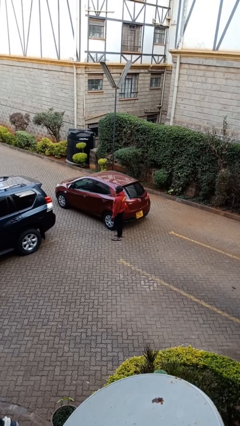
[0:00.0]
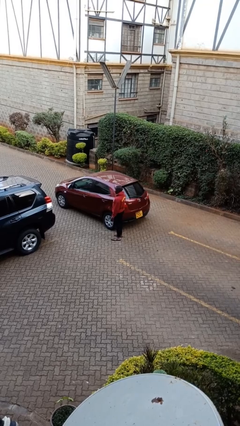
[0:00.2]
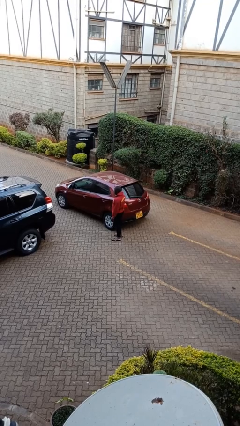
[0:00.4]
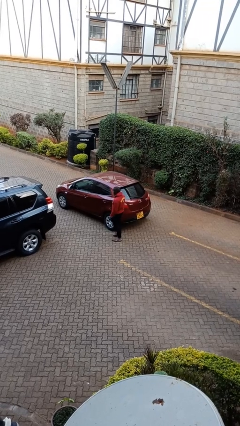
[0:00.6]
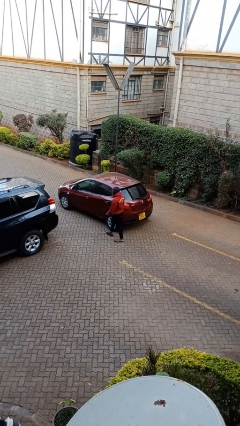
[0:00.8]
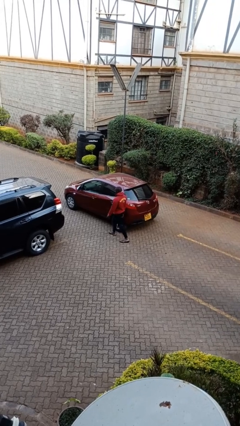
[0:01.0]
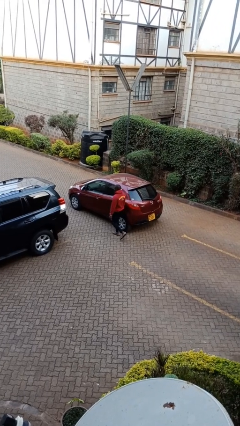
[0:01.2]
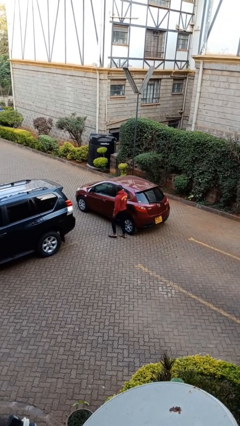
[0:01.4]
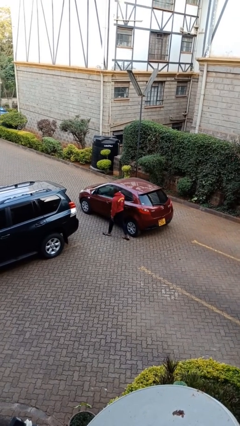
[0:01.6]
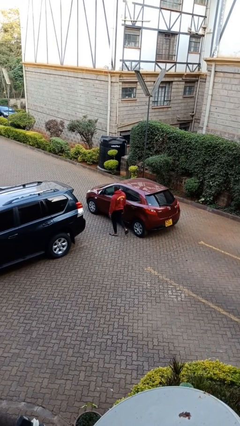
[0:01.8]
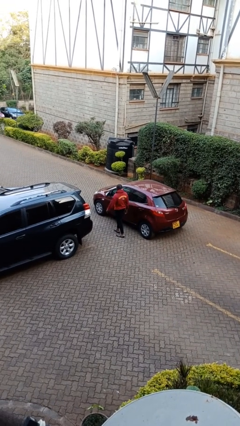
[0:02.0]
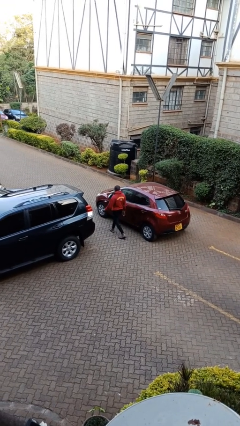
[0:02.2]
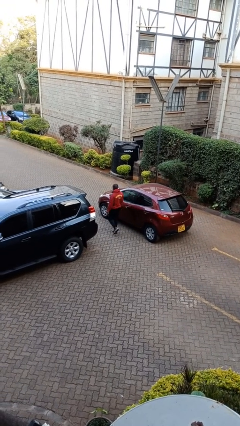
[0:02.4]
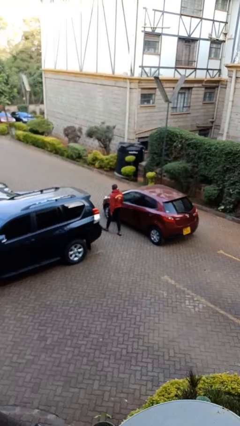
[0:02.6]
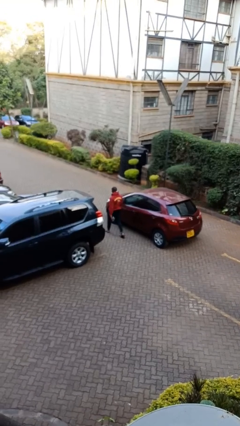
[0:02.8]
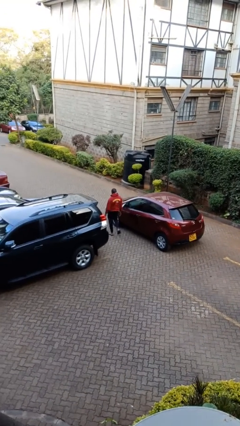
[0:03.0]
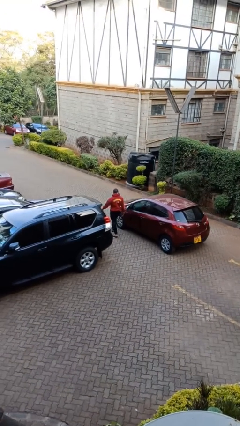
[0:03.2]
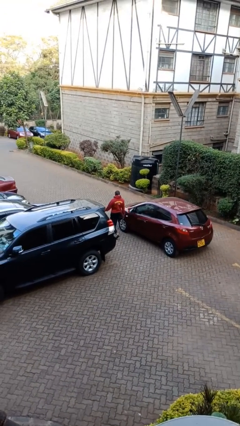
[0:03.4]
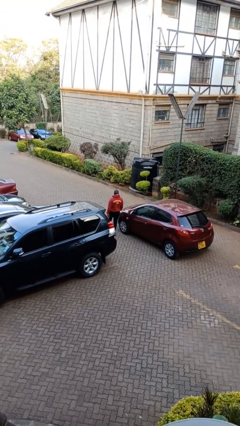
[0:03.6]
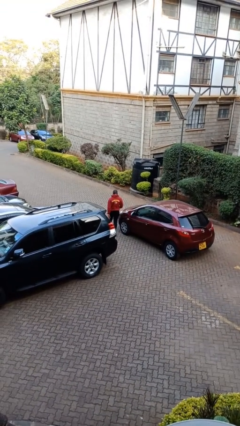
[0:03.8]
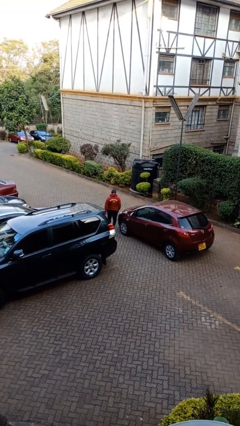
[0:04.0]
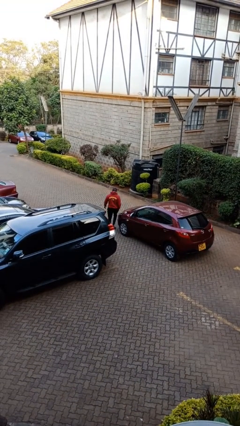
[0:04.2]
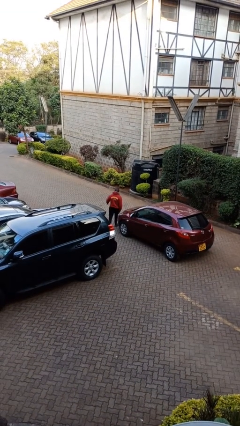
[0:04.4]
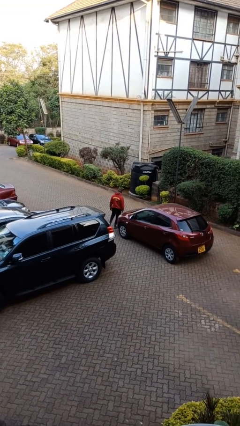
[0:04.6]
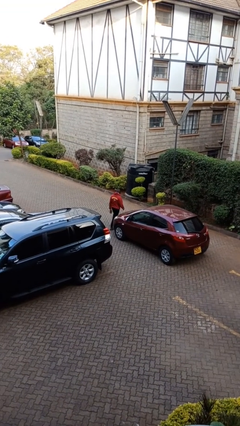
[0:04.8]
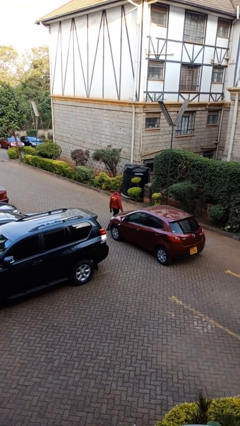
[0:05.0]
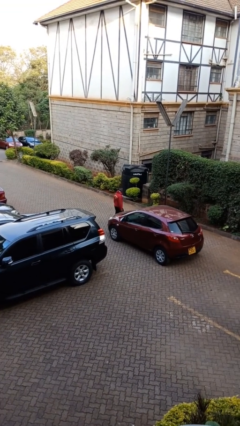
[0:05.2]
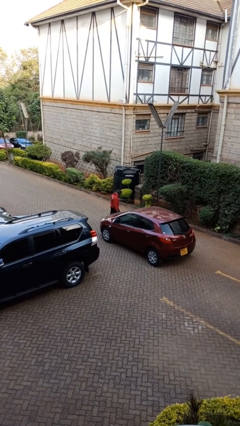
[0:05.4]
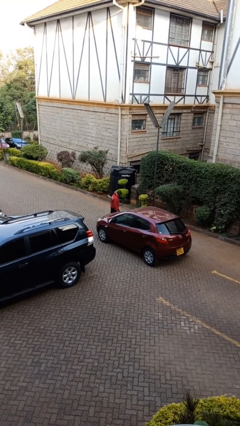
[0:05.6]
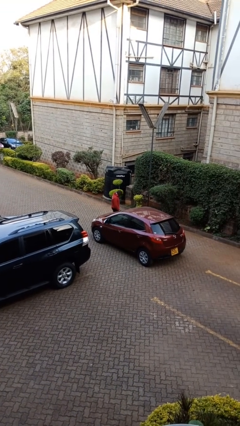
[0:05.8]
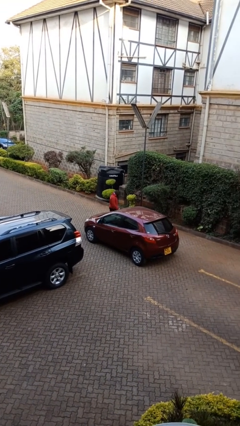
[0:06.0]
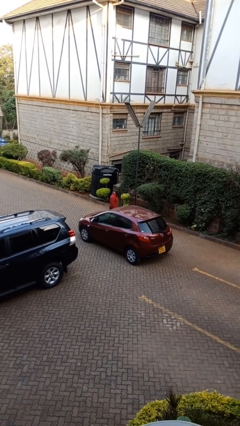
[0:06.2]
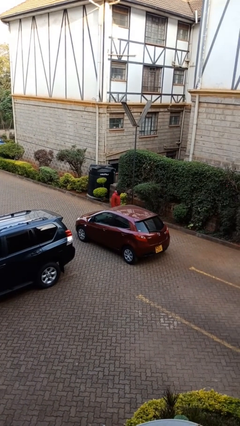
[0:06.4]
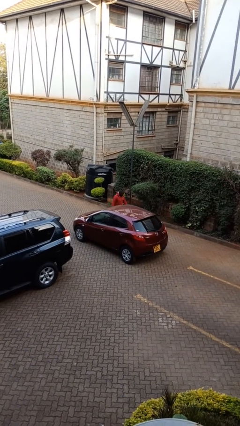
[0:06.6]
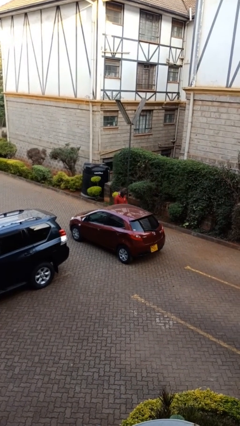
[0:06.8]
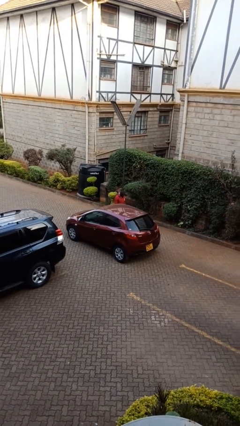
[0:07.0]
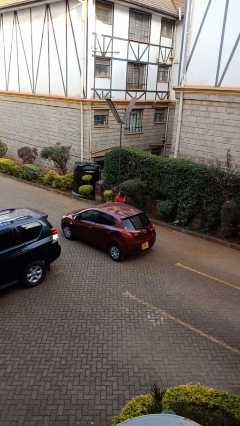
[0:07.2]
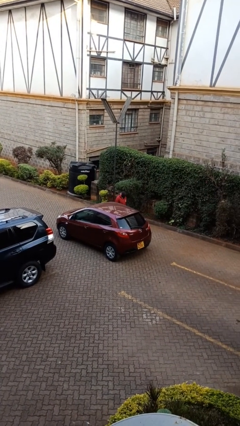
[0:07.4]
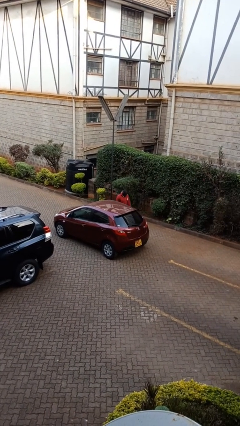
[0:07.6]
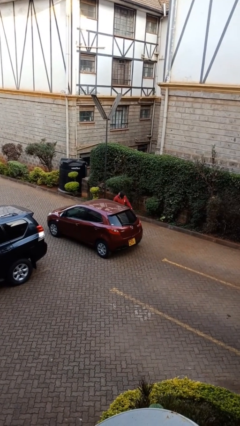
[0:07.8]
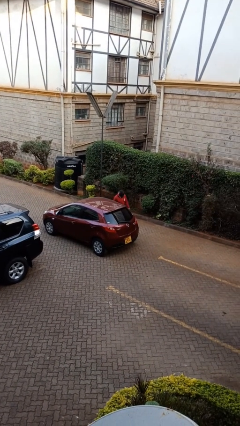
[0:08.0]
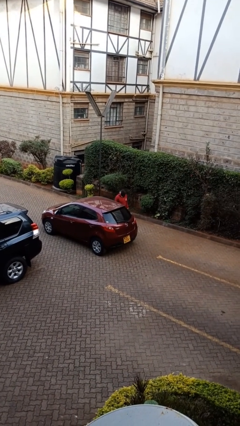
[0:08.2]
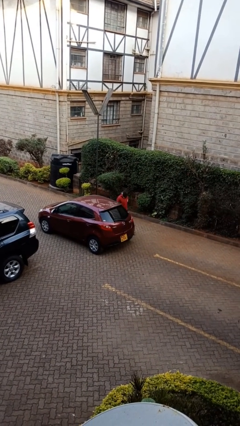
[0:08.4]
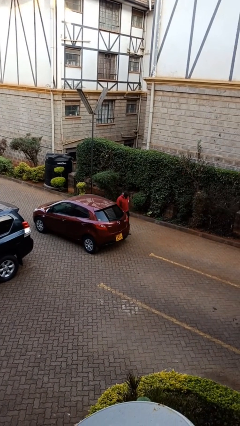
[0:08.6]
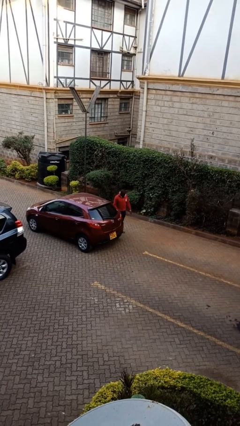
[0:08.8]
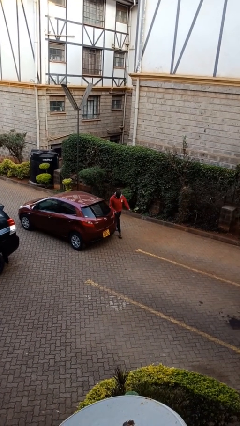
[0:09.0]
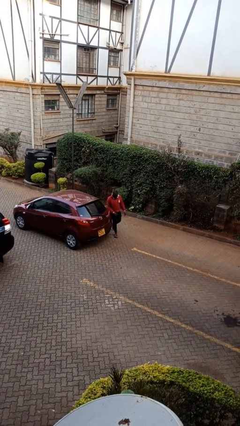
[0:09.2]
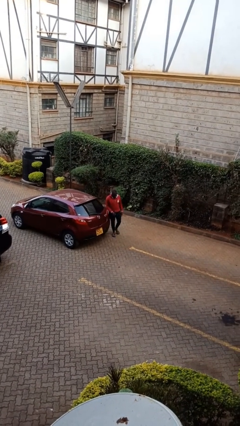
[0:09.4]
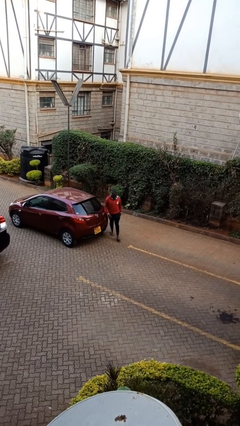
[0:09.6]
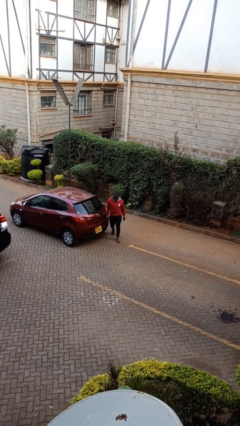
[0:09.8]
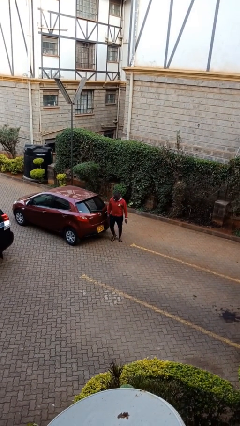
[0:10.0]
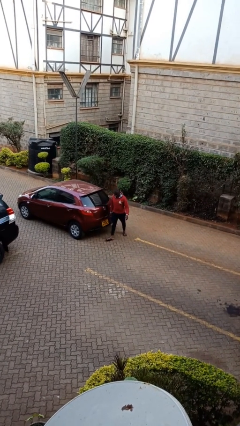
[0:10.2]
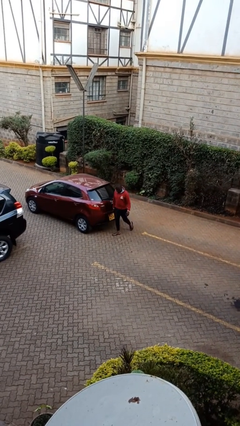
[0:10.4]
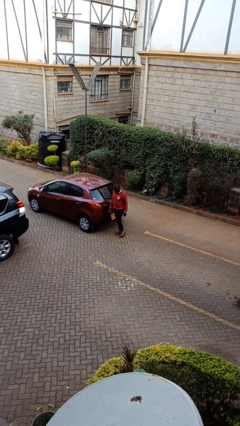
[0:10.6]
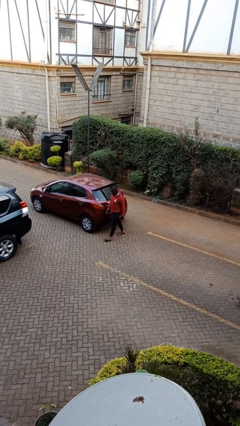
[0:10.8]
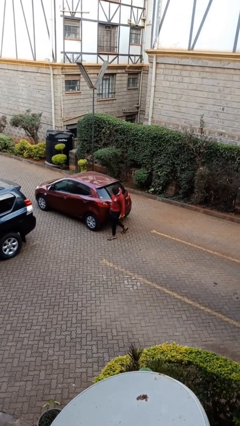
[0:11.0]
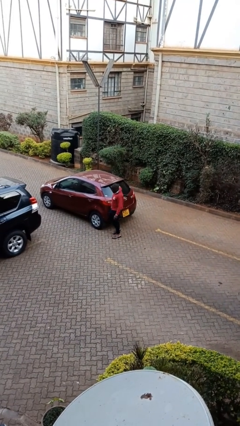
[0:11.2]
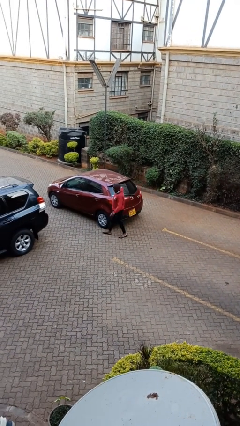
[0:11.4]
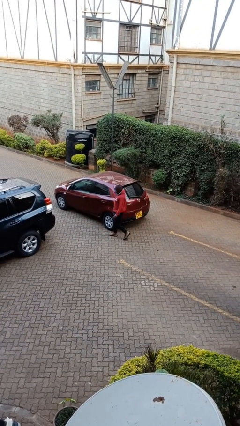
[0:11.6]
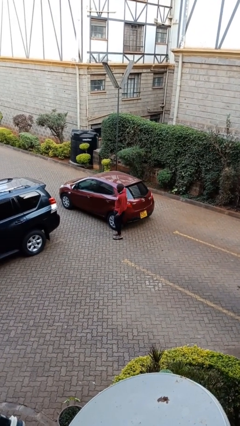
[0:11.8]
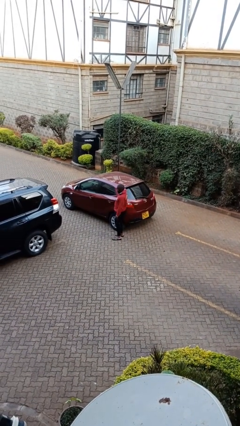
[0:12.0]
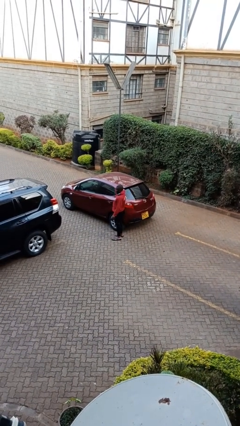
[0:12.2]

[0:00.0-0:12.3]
person walks around car

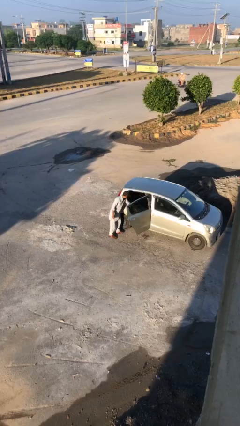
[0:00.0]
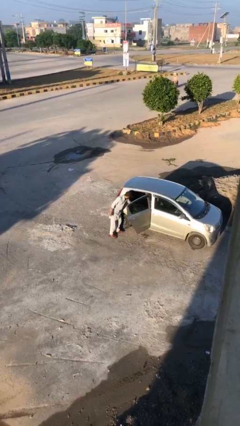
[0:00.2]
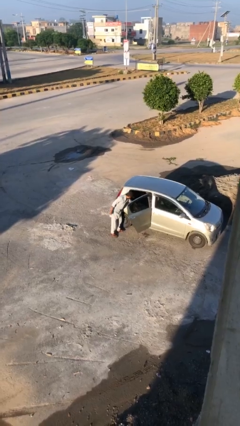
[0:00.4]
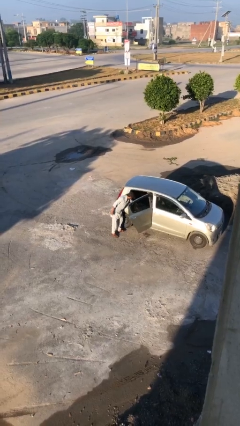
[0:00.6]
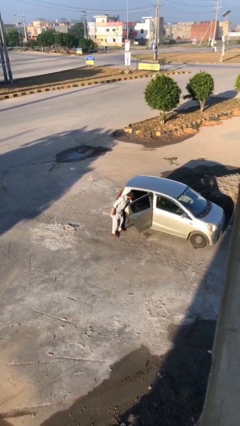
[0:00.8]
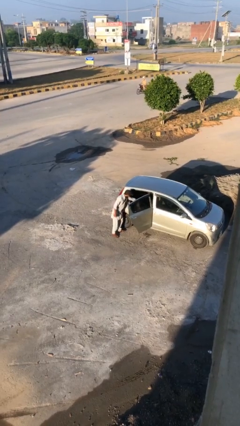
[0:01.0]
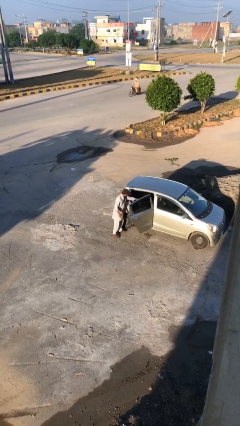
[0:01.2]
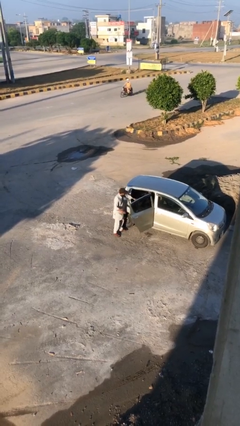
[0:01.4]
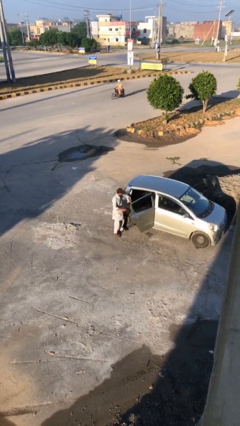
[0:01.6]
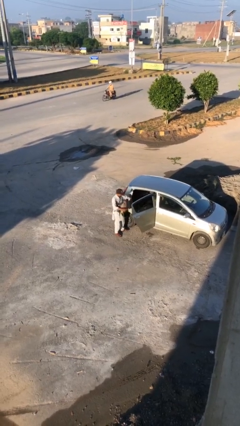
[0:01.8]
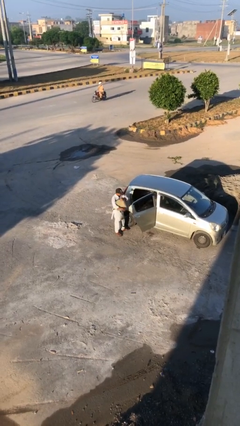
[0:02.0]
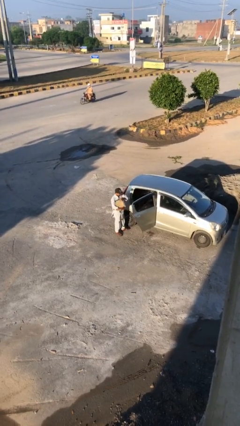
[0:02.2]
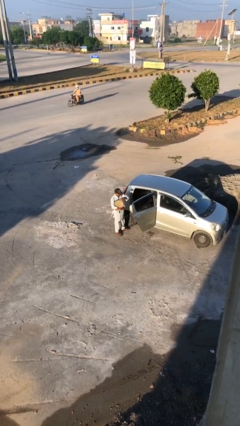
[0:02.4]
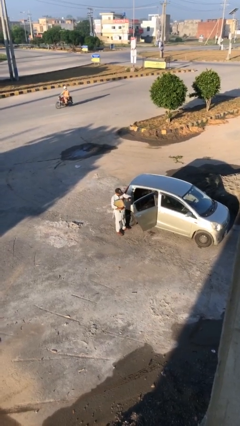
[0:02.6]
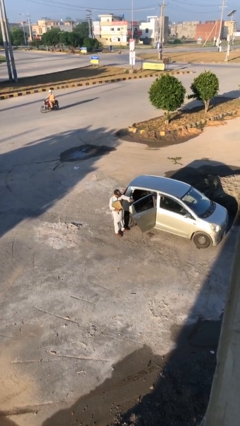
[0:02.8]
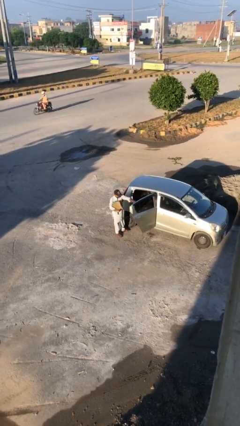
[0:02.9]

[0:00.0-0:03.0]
person unloads car

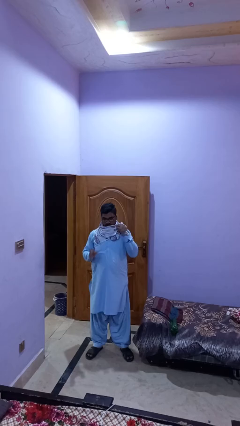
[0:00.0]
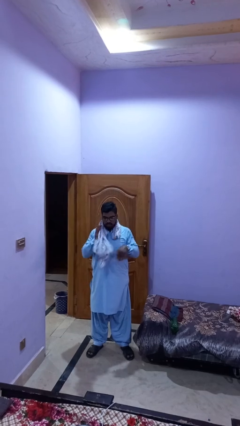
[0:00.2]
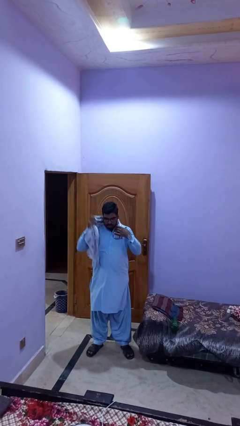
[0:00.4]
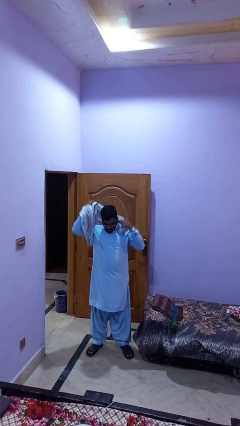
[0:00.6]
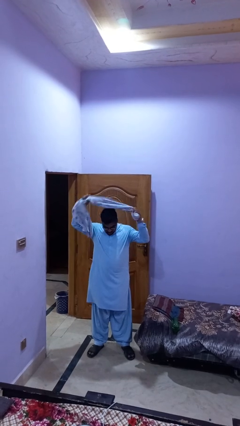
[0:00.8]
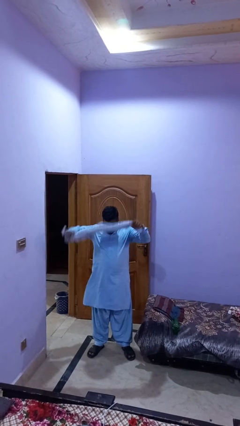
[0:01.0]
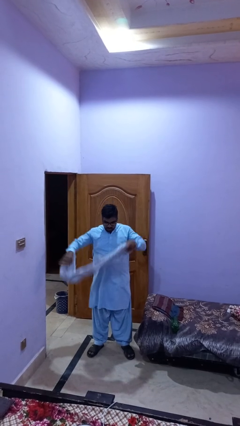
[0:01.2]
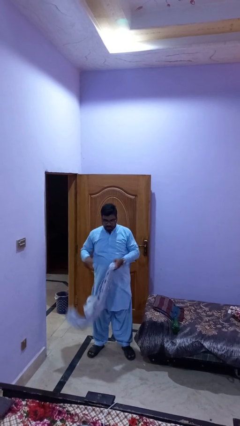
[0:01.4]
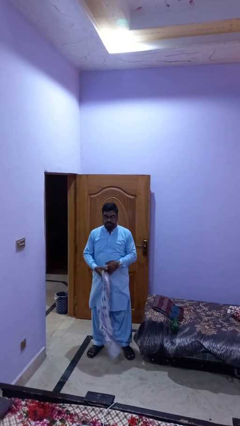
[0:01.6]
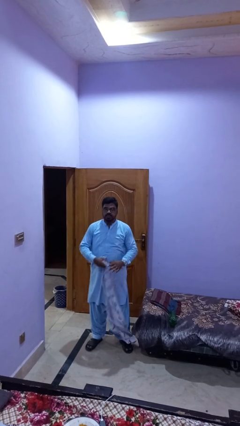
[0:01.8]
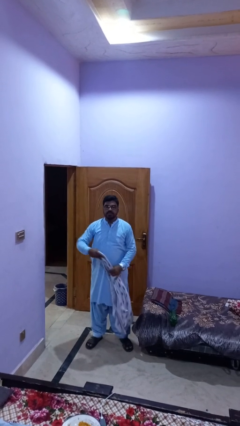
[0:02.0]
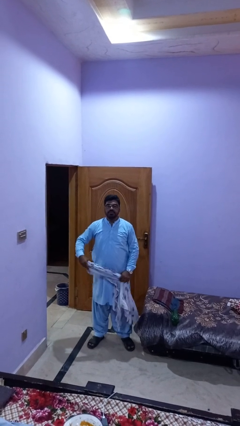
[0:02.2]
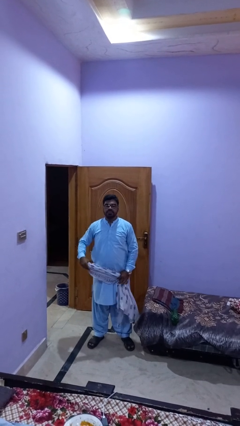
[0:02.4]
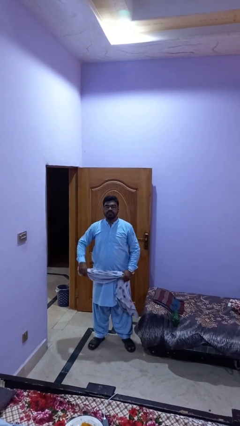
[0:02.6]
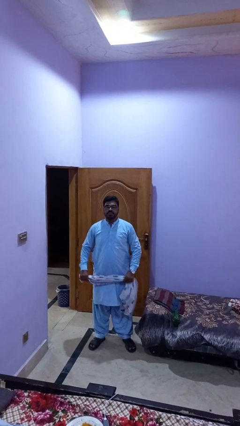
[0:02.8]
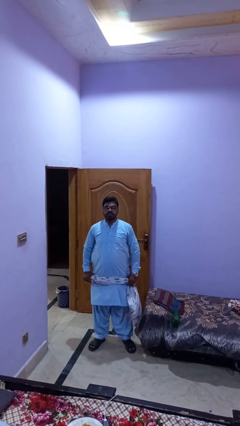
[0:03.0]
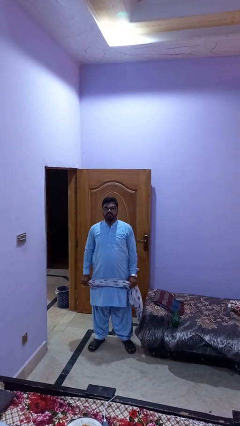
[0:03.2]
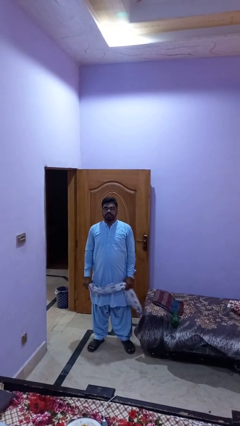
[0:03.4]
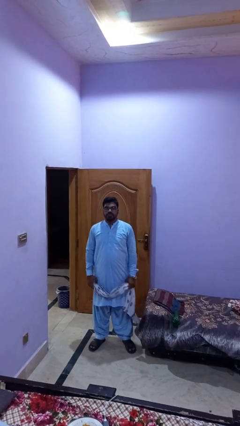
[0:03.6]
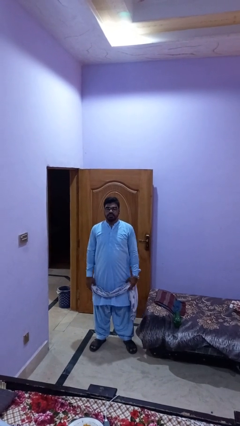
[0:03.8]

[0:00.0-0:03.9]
person takes off scarf
